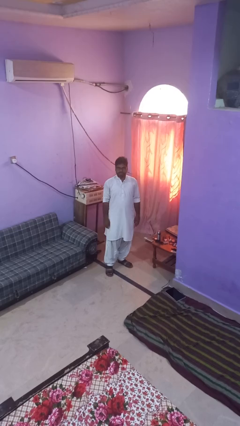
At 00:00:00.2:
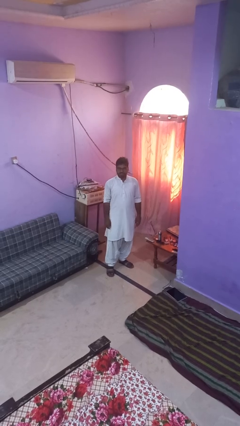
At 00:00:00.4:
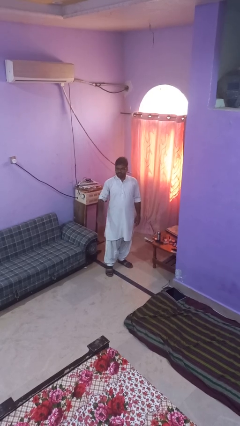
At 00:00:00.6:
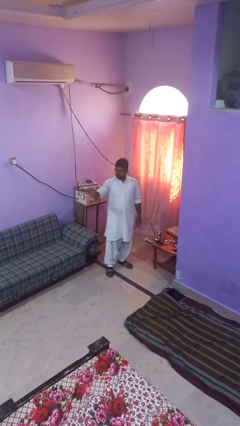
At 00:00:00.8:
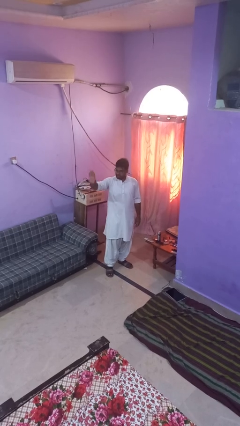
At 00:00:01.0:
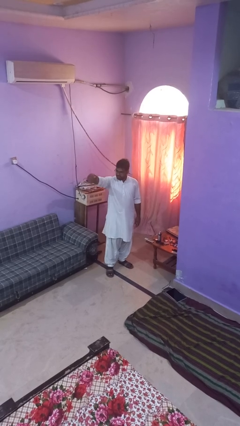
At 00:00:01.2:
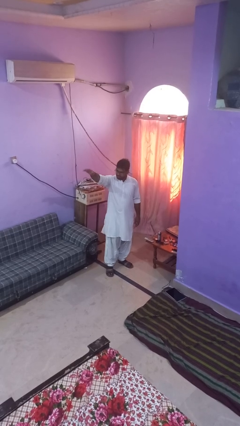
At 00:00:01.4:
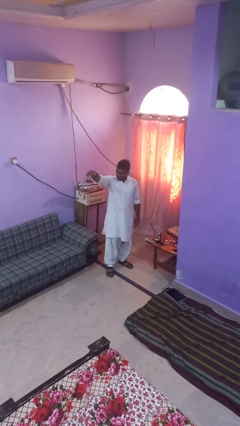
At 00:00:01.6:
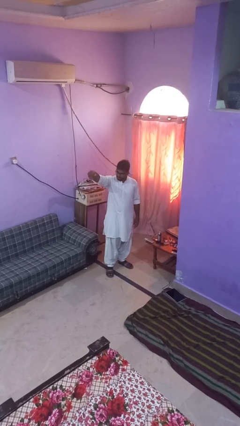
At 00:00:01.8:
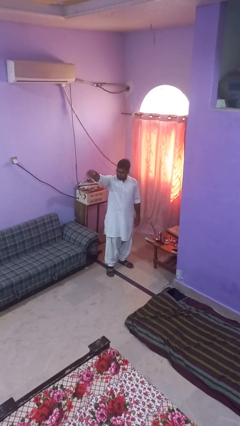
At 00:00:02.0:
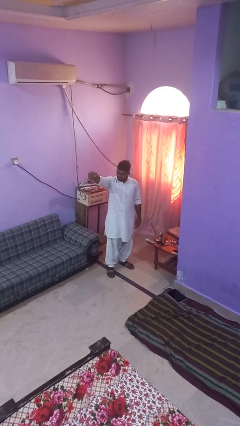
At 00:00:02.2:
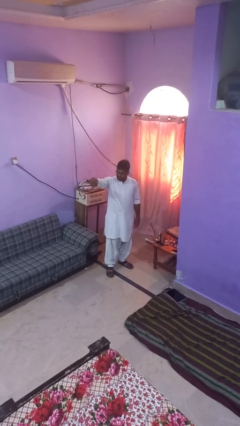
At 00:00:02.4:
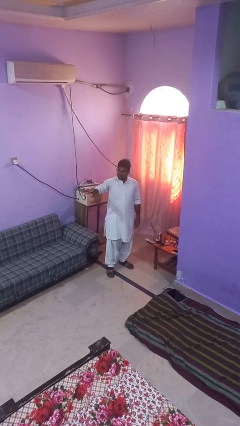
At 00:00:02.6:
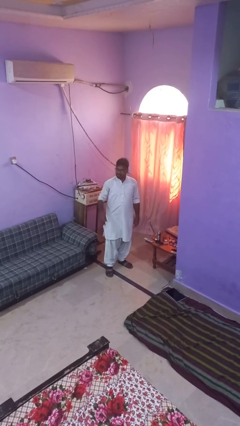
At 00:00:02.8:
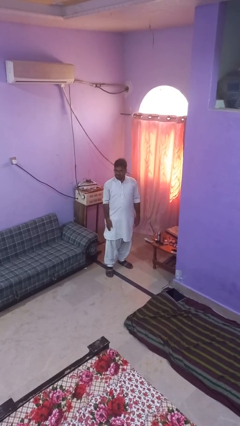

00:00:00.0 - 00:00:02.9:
person gestures come here

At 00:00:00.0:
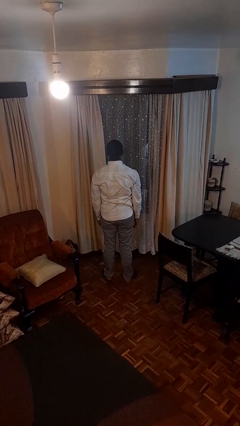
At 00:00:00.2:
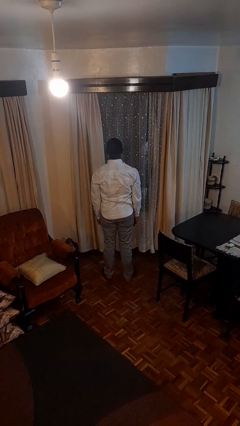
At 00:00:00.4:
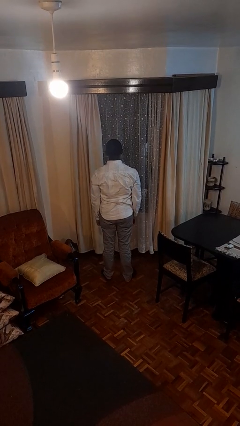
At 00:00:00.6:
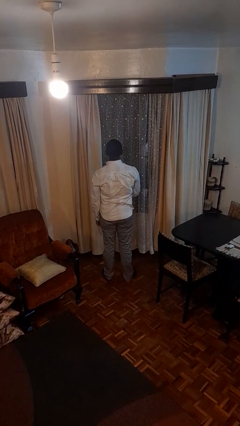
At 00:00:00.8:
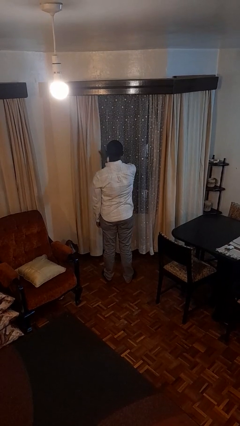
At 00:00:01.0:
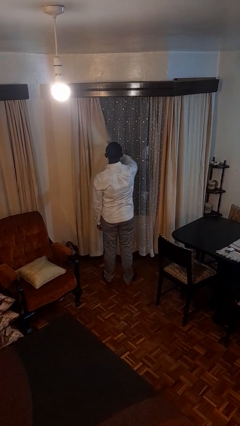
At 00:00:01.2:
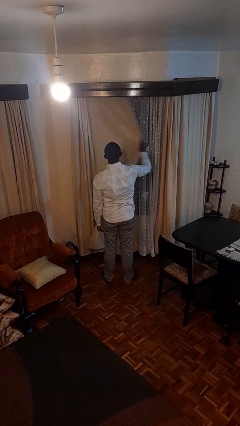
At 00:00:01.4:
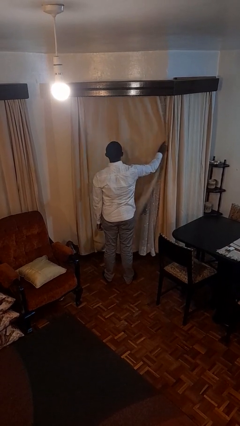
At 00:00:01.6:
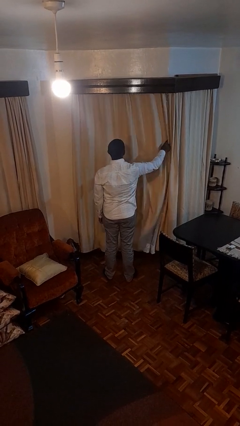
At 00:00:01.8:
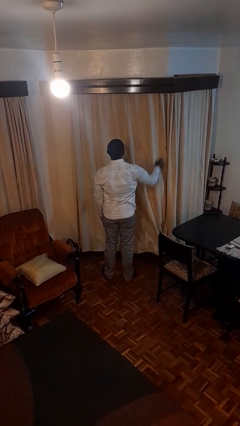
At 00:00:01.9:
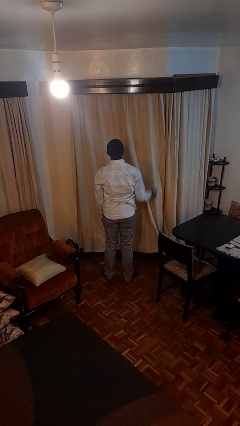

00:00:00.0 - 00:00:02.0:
person closes curtains

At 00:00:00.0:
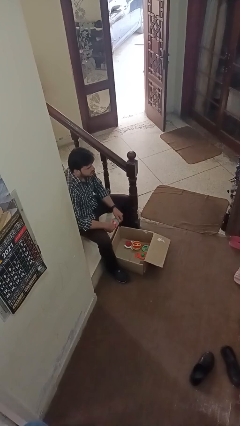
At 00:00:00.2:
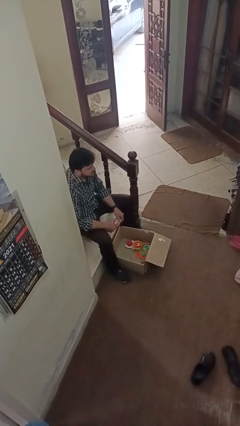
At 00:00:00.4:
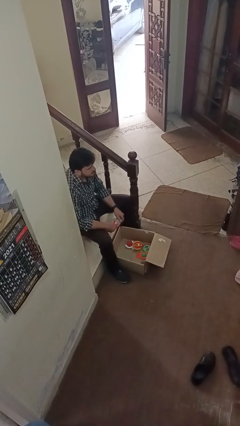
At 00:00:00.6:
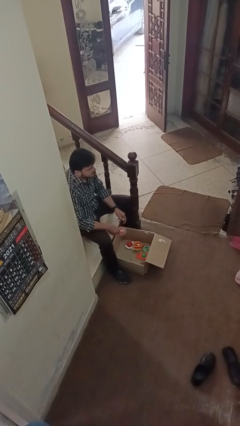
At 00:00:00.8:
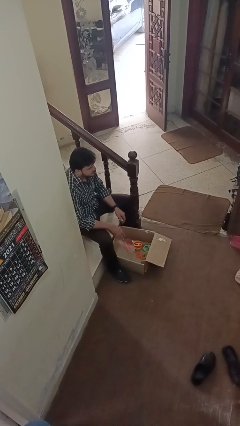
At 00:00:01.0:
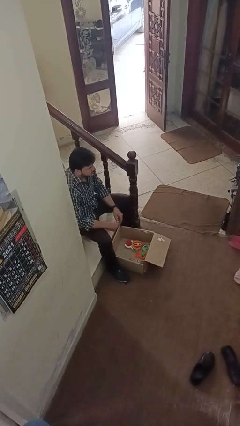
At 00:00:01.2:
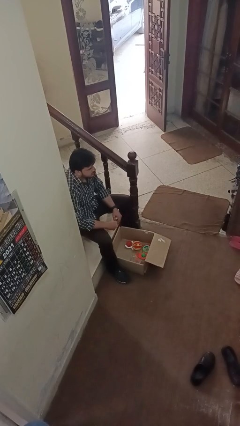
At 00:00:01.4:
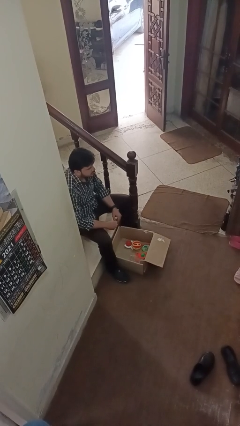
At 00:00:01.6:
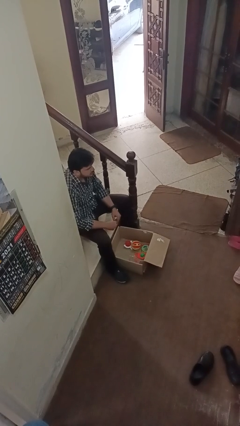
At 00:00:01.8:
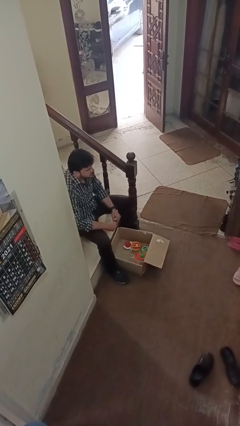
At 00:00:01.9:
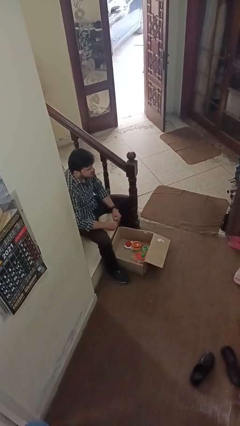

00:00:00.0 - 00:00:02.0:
person puts object into box

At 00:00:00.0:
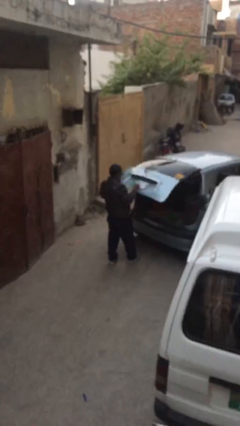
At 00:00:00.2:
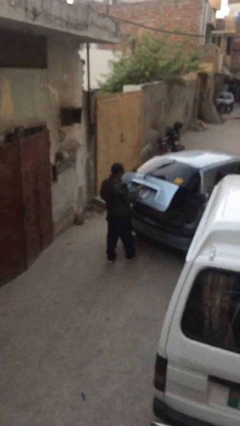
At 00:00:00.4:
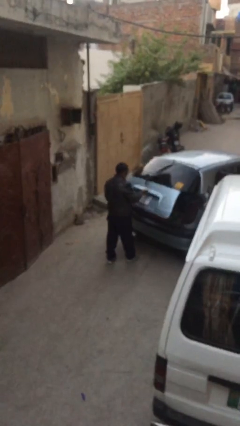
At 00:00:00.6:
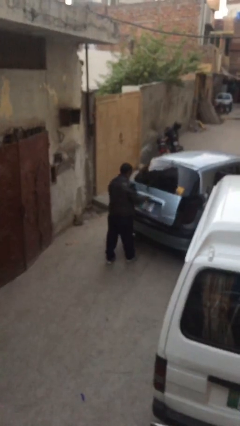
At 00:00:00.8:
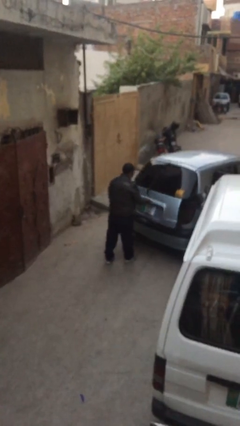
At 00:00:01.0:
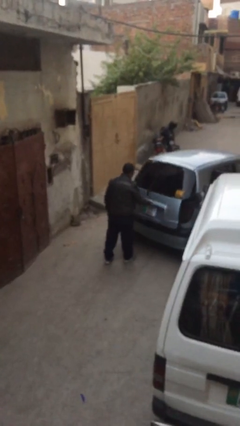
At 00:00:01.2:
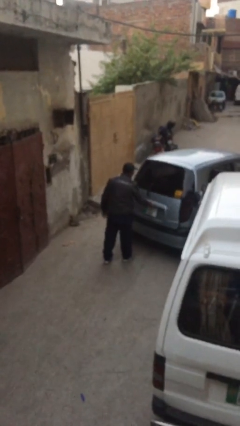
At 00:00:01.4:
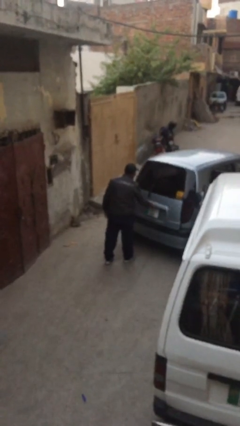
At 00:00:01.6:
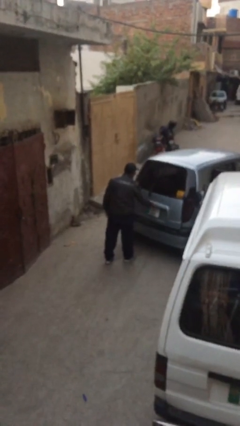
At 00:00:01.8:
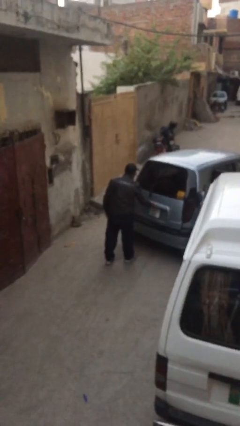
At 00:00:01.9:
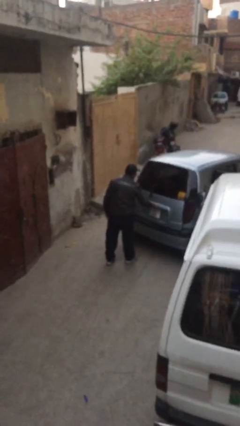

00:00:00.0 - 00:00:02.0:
person closes car trunk

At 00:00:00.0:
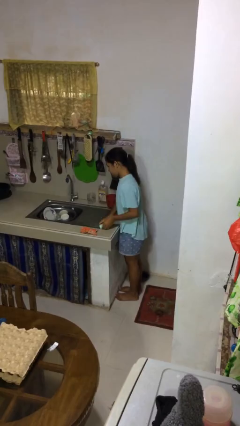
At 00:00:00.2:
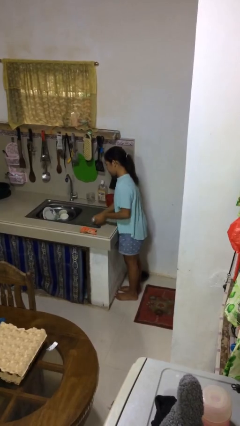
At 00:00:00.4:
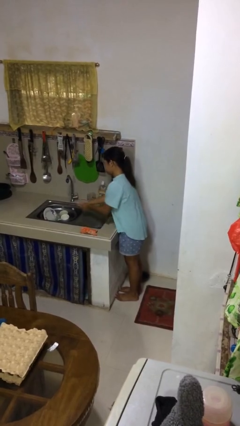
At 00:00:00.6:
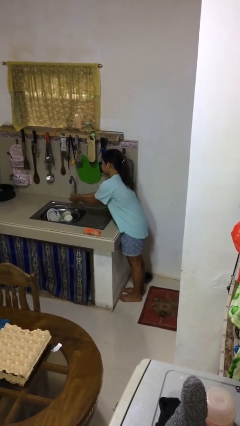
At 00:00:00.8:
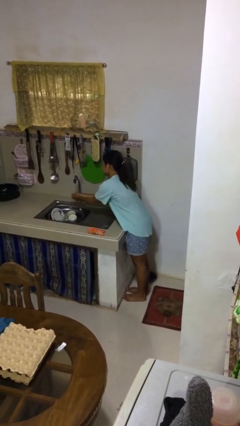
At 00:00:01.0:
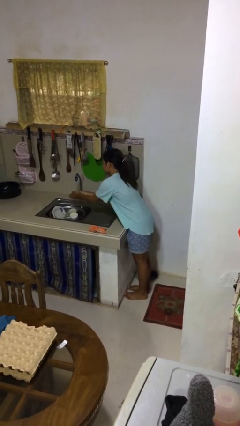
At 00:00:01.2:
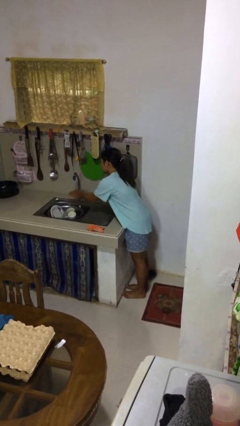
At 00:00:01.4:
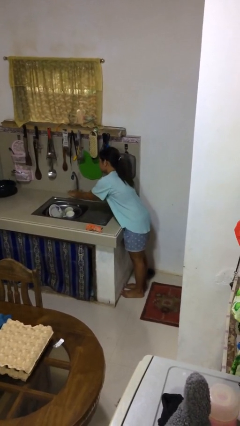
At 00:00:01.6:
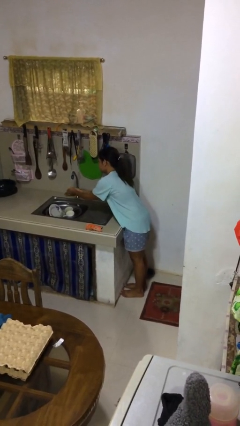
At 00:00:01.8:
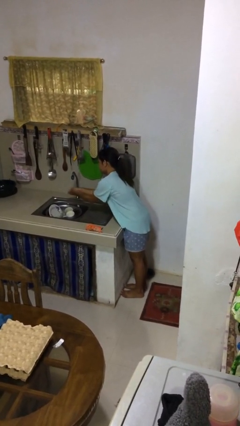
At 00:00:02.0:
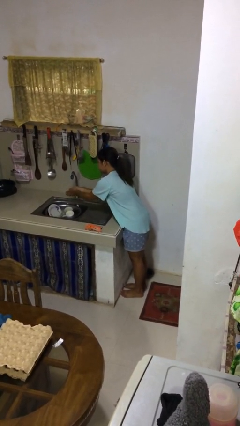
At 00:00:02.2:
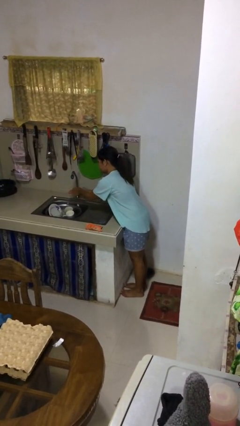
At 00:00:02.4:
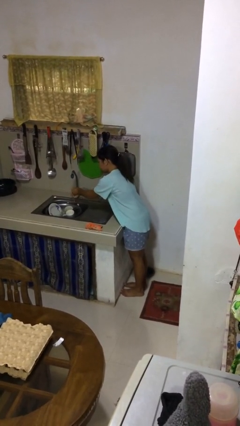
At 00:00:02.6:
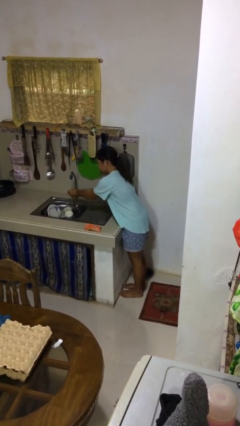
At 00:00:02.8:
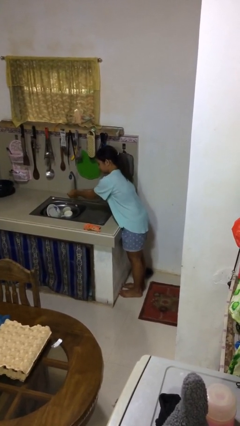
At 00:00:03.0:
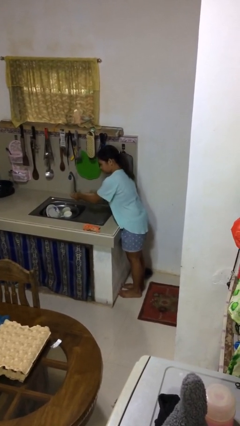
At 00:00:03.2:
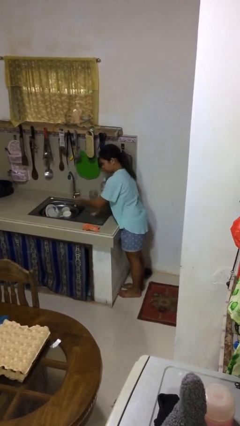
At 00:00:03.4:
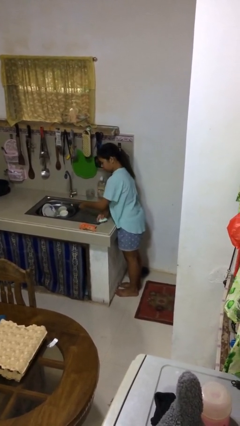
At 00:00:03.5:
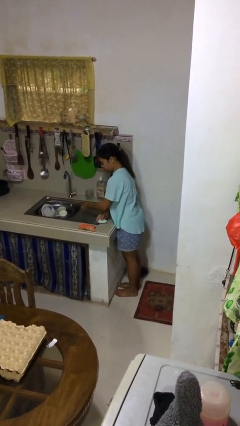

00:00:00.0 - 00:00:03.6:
person washes hands

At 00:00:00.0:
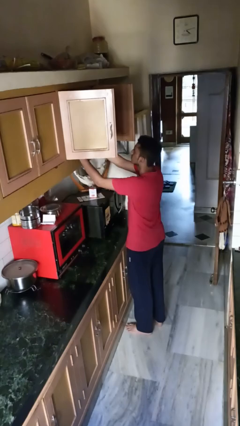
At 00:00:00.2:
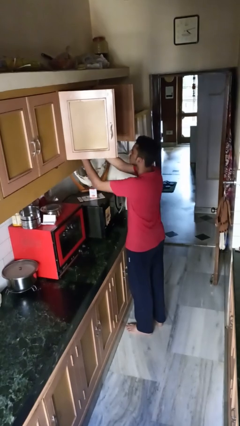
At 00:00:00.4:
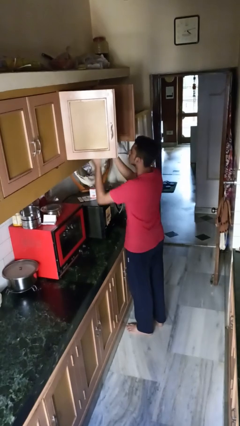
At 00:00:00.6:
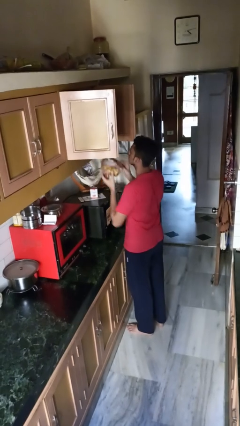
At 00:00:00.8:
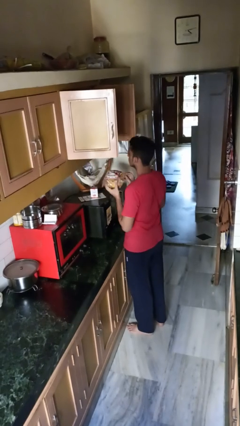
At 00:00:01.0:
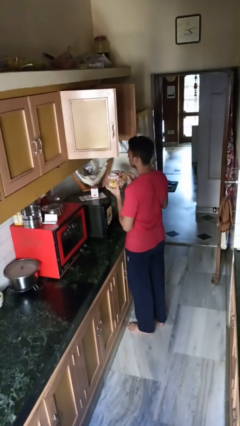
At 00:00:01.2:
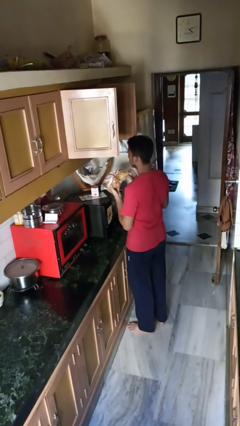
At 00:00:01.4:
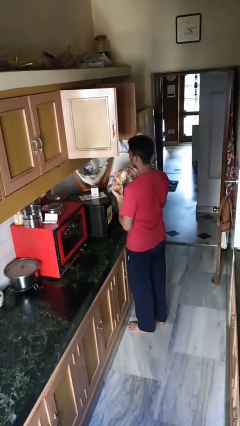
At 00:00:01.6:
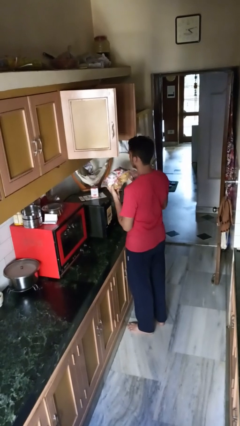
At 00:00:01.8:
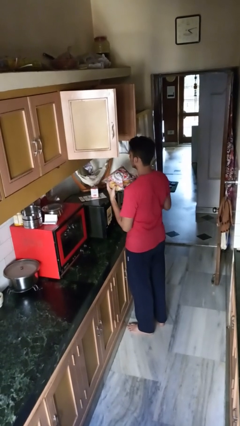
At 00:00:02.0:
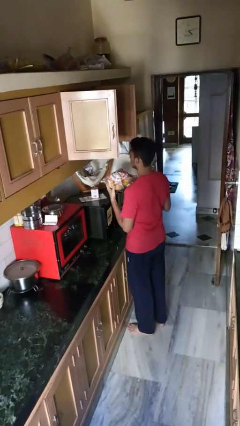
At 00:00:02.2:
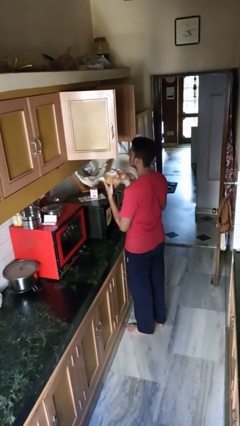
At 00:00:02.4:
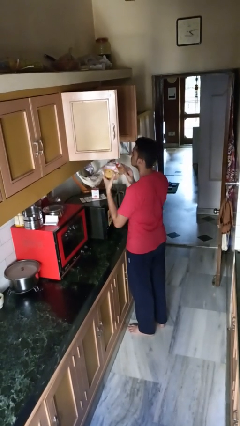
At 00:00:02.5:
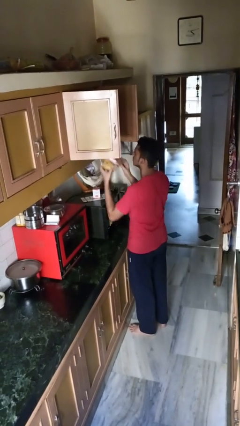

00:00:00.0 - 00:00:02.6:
person takes object from cabinet

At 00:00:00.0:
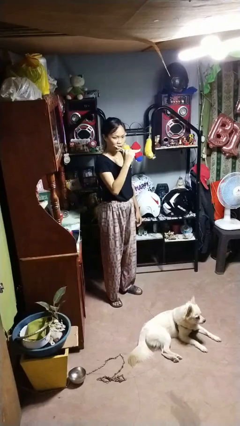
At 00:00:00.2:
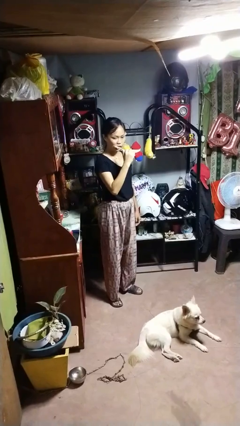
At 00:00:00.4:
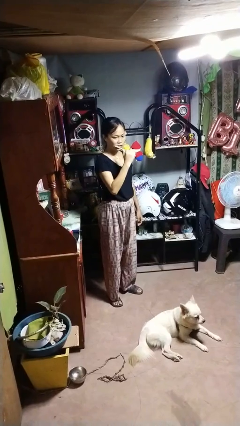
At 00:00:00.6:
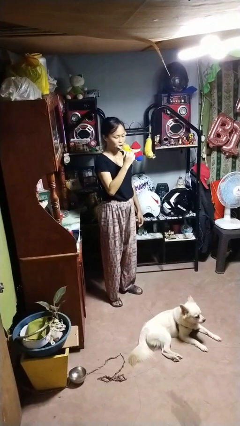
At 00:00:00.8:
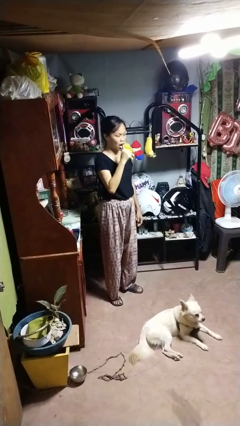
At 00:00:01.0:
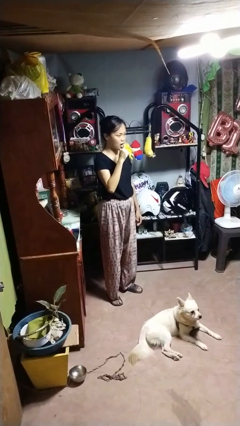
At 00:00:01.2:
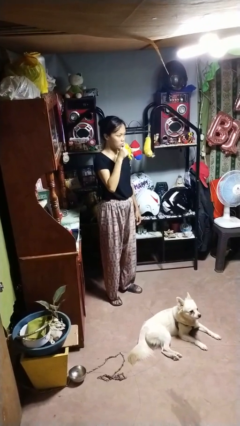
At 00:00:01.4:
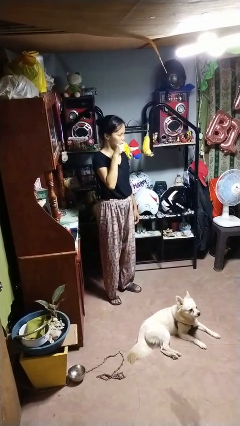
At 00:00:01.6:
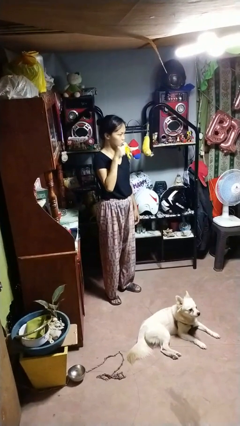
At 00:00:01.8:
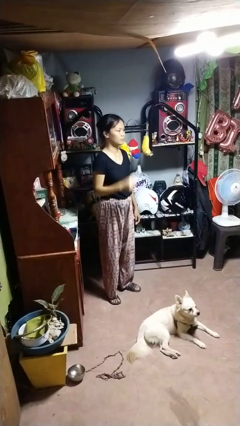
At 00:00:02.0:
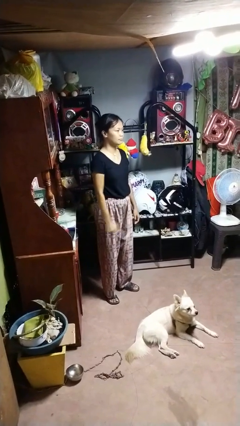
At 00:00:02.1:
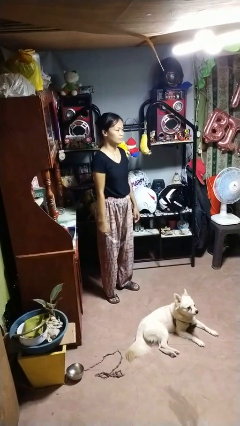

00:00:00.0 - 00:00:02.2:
person brushes teeth
